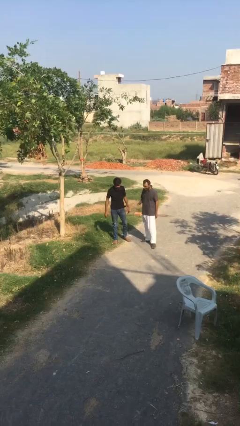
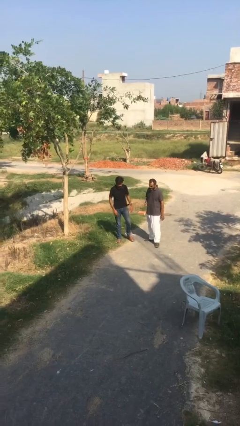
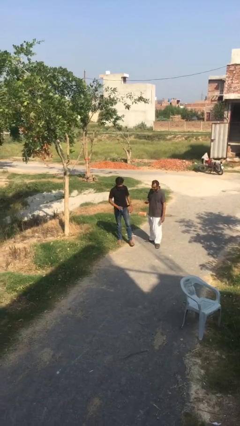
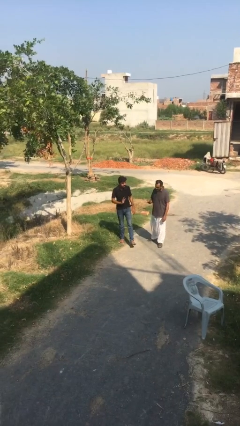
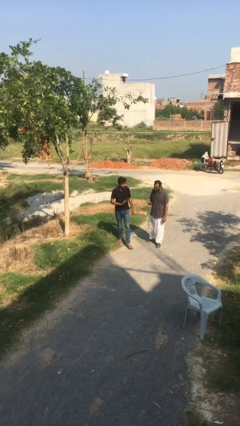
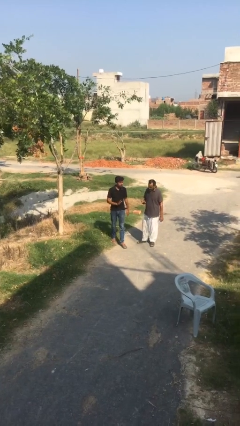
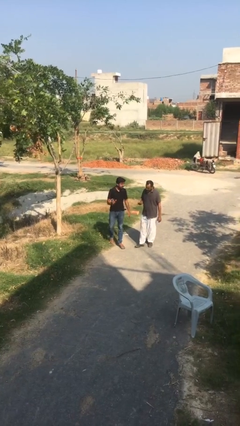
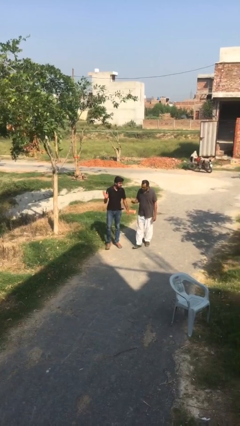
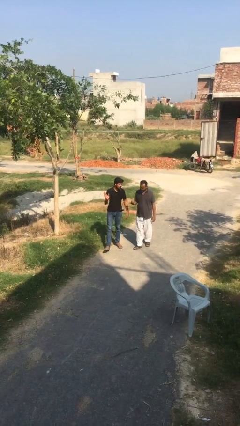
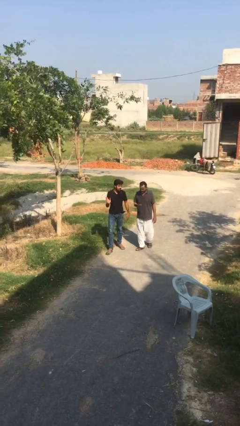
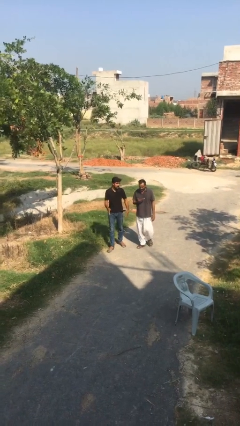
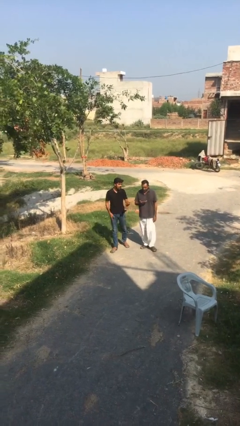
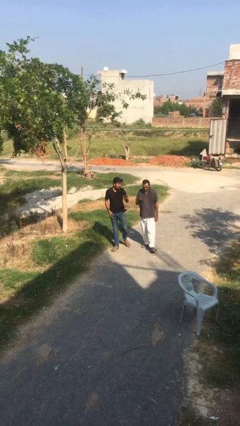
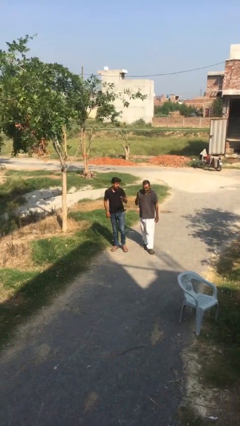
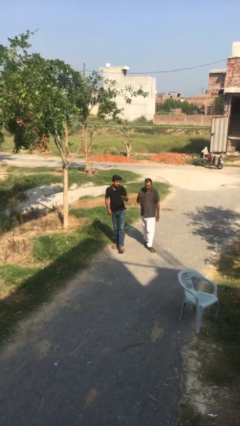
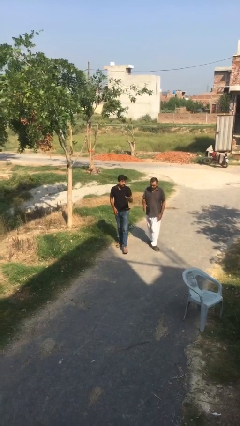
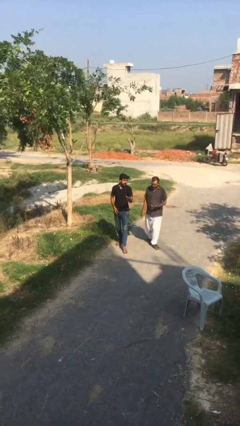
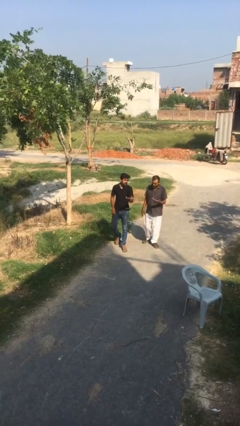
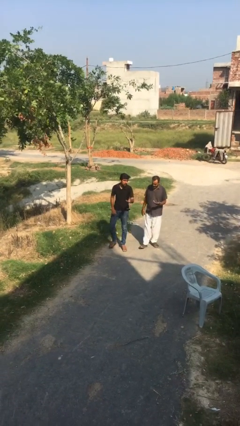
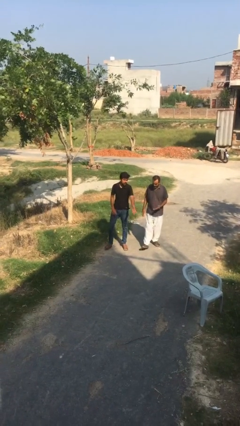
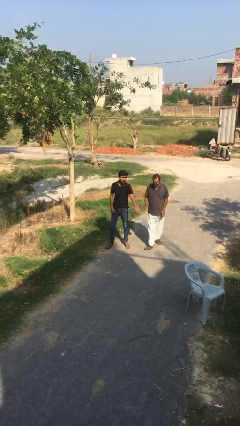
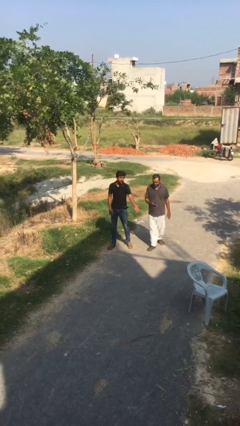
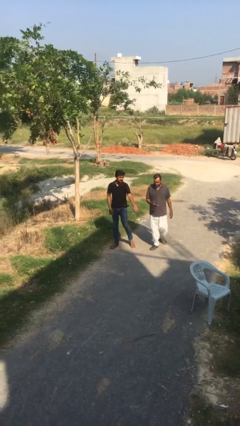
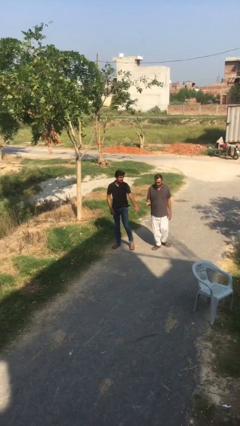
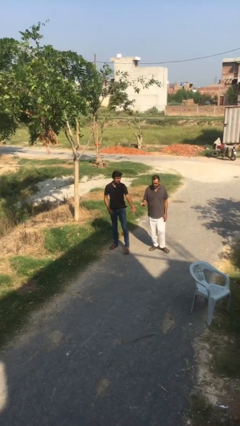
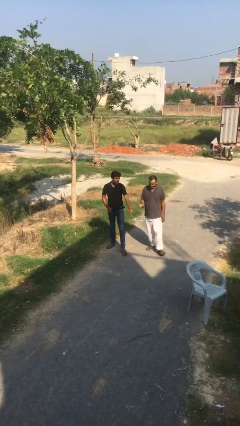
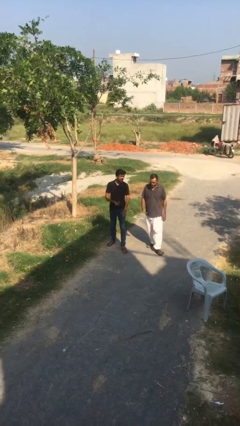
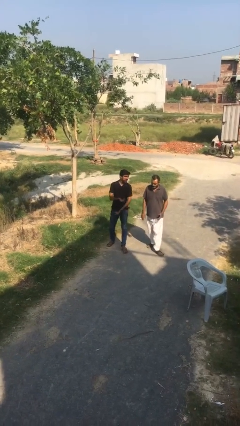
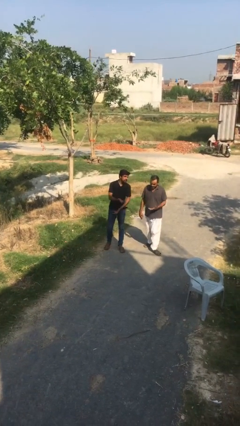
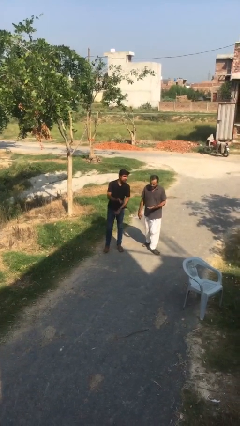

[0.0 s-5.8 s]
person talks to person

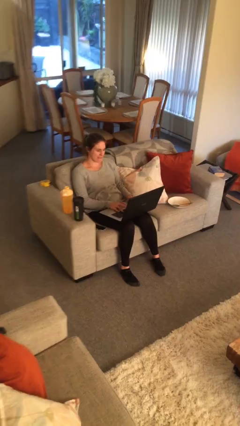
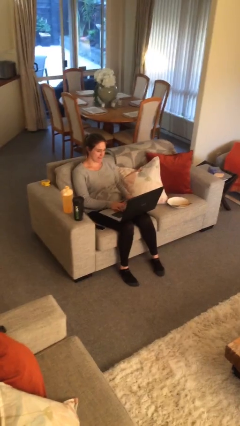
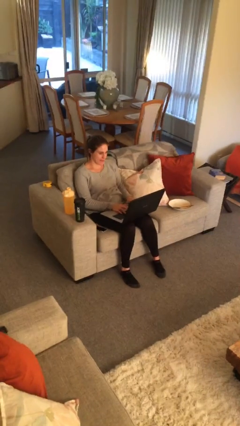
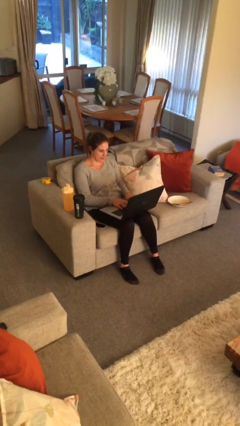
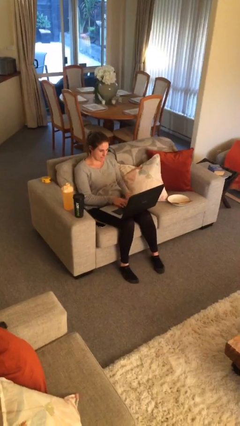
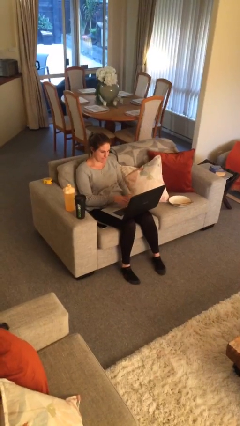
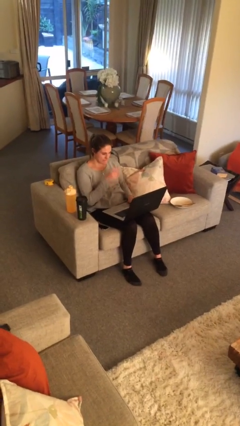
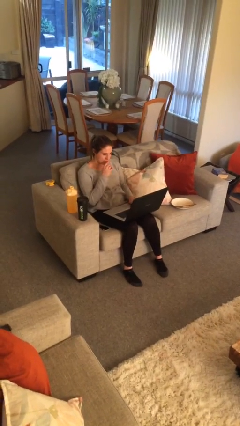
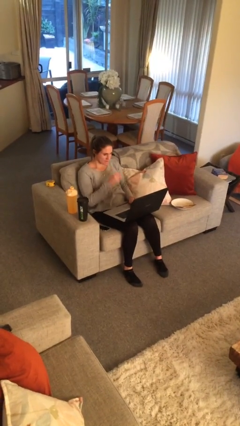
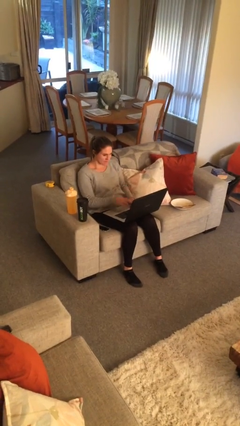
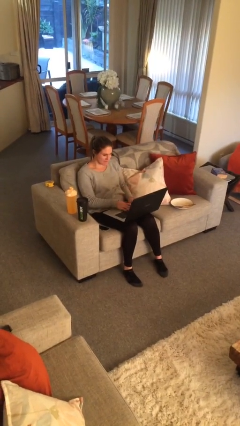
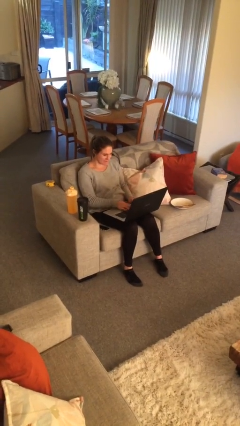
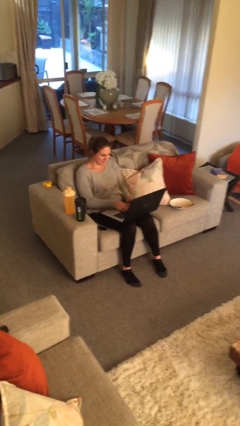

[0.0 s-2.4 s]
person interacts with laptop

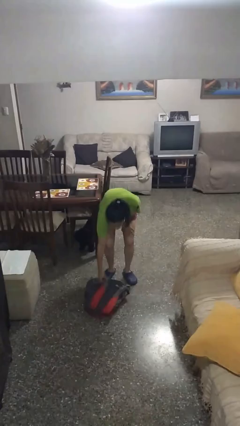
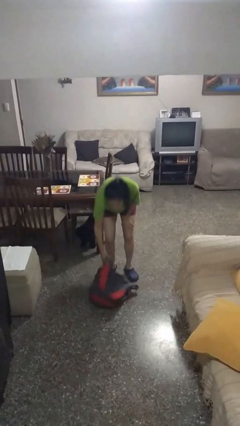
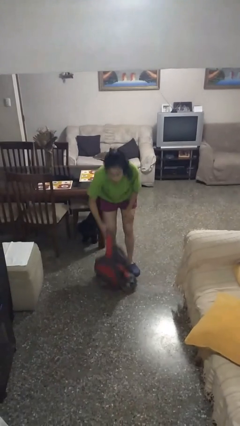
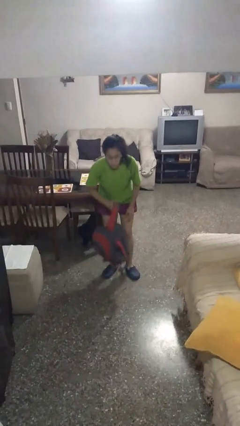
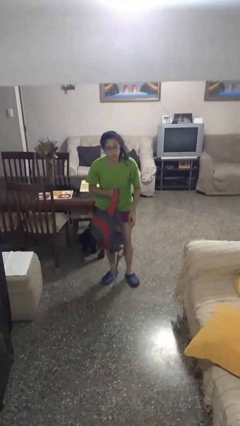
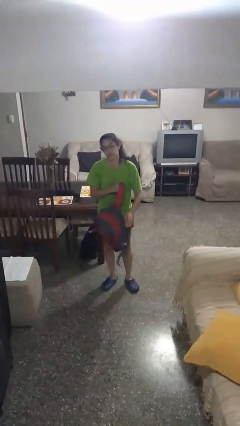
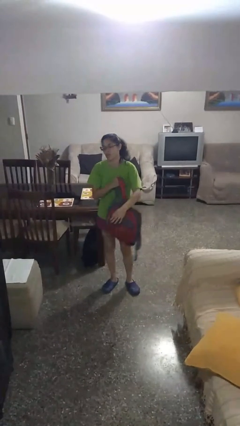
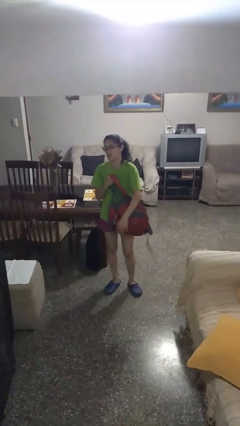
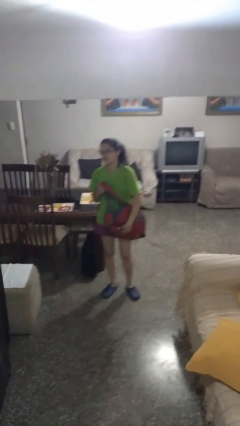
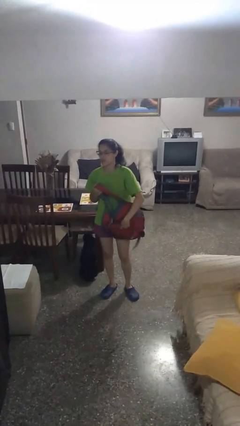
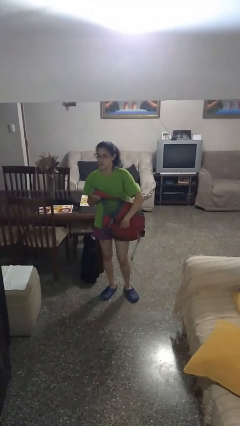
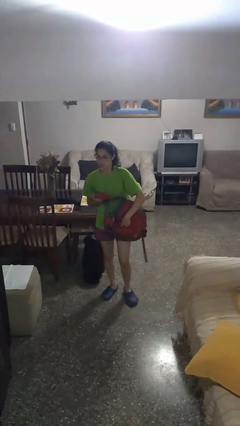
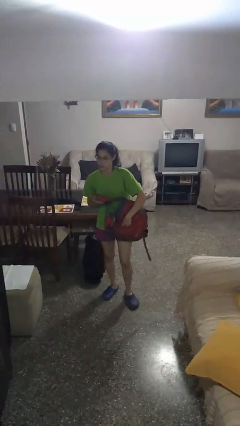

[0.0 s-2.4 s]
person picks up object from floor

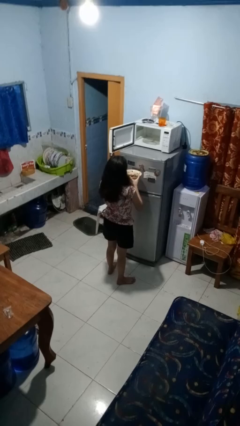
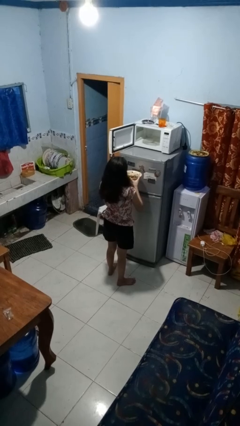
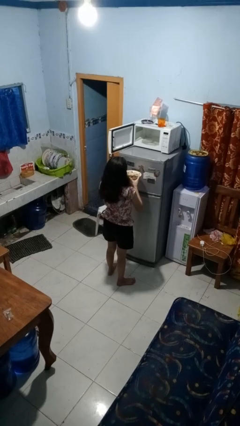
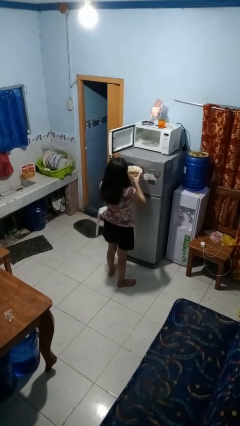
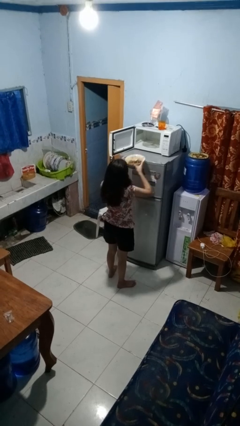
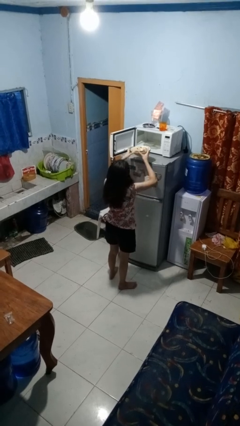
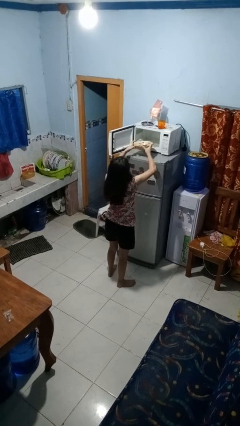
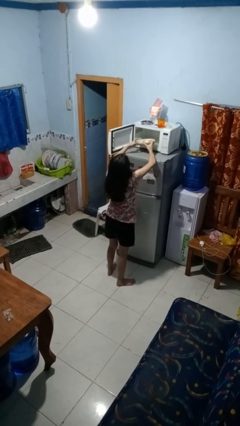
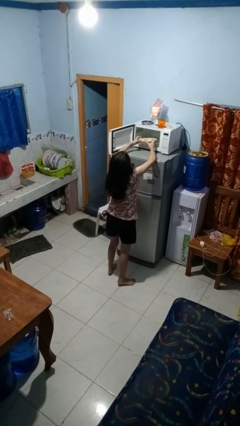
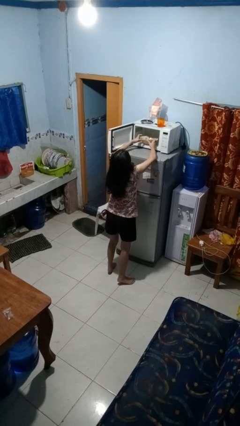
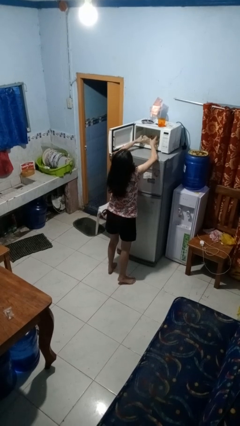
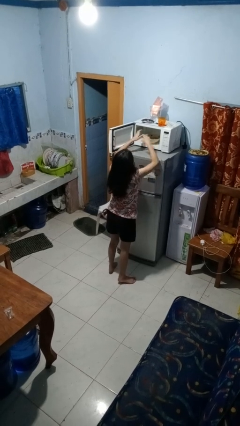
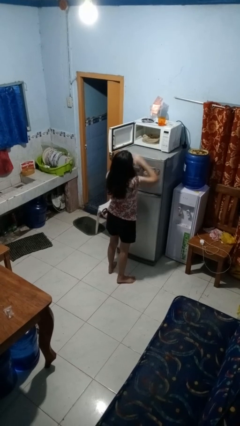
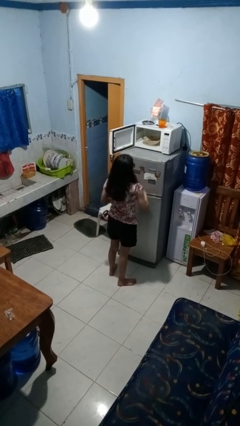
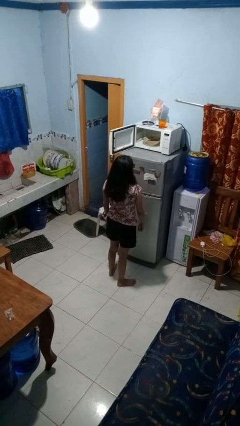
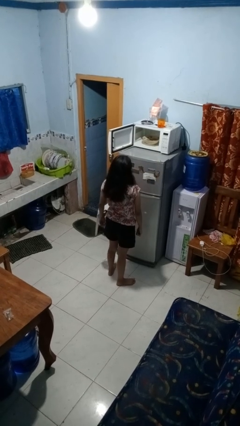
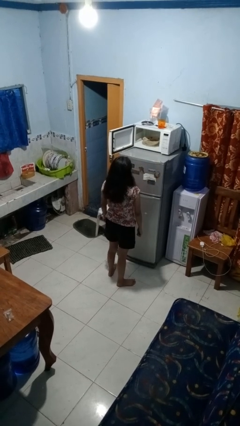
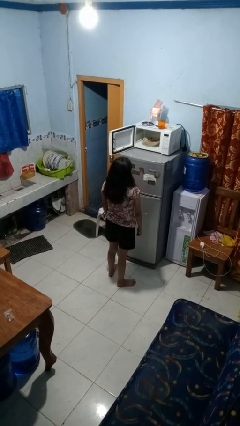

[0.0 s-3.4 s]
person puts object into microwave

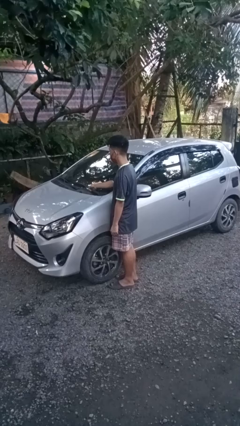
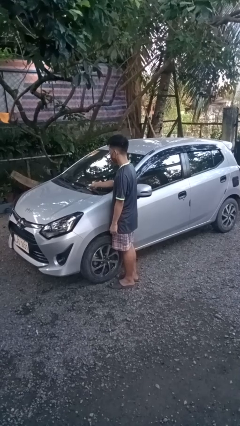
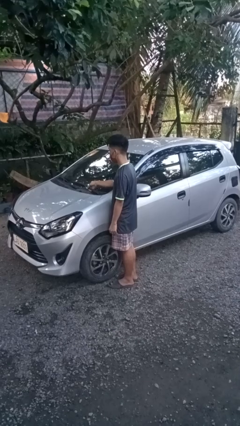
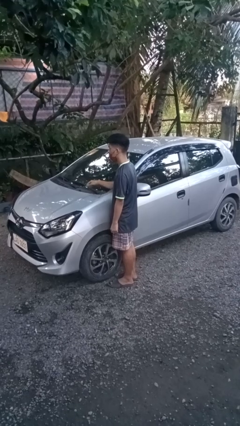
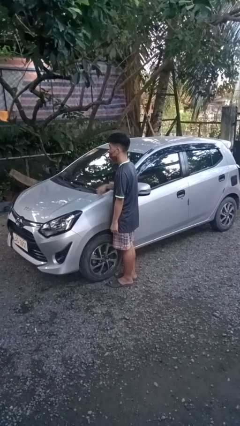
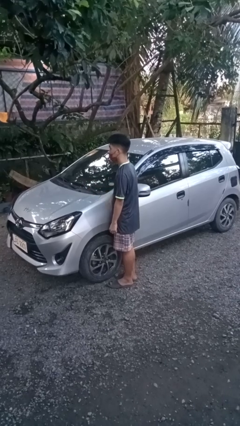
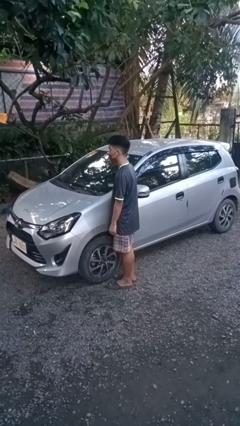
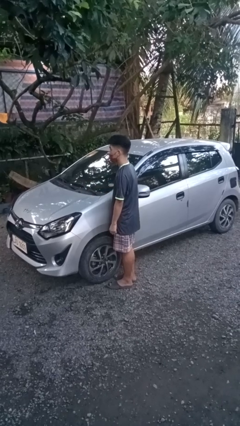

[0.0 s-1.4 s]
person flips down car wipers

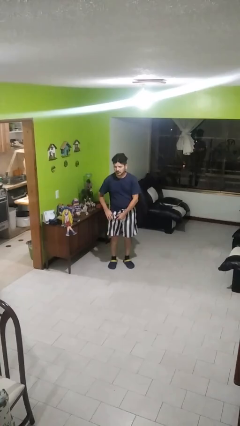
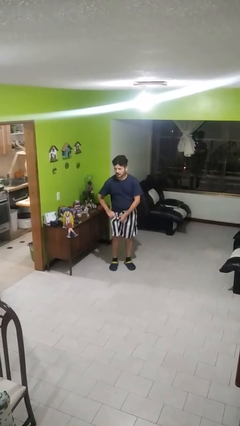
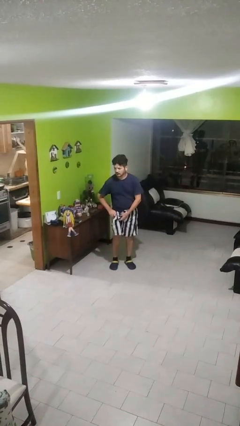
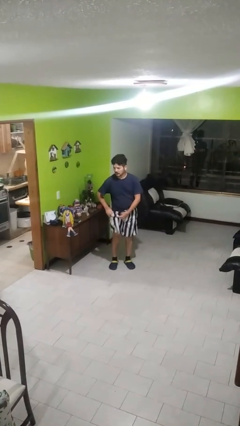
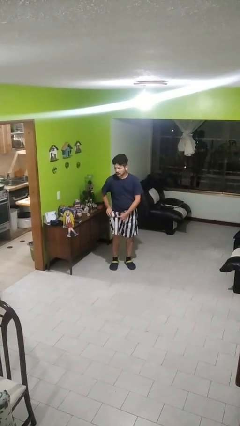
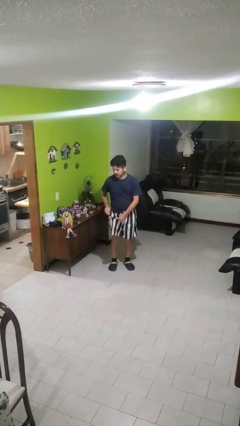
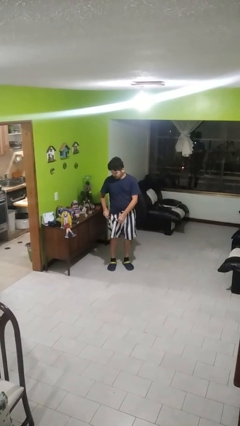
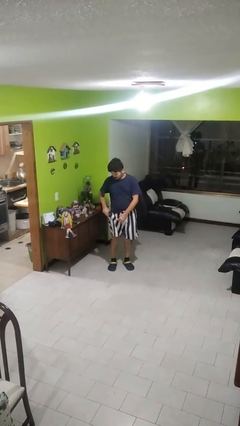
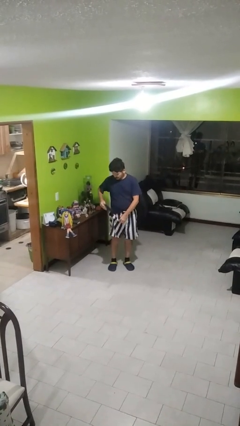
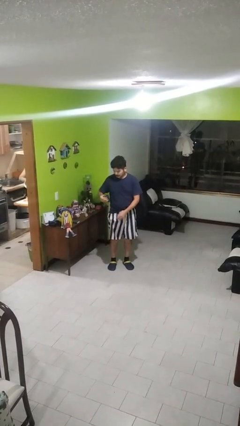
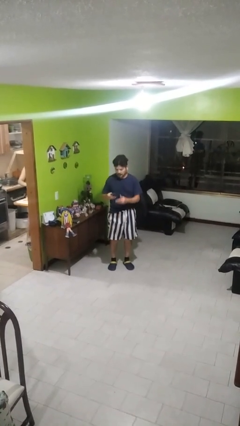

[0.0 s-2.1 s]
person takes phone from pocket

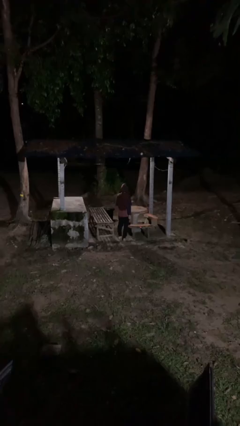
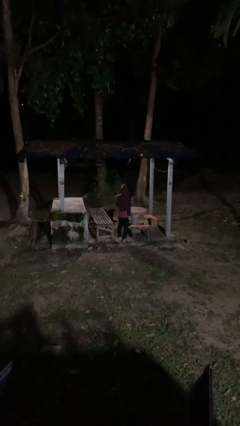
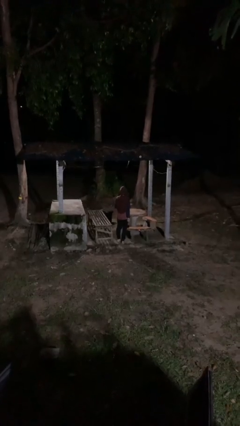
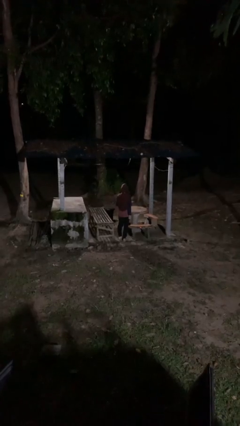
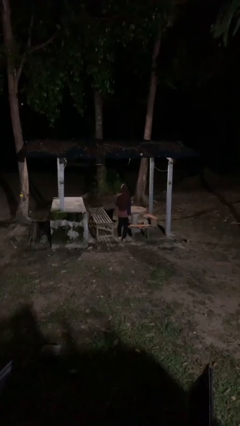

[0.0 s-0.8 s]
person gestures be quiet
